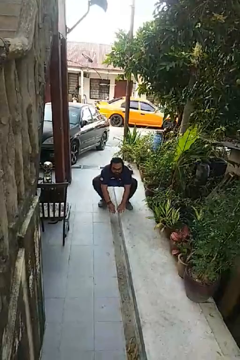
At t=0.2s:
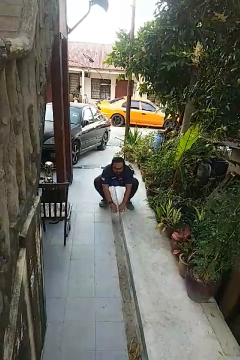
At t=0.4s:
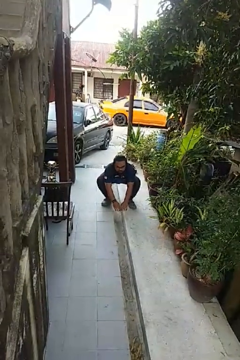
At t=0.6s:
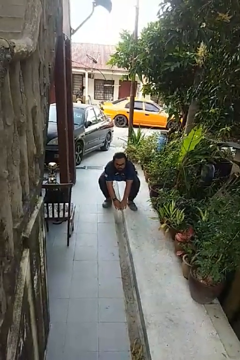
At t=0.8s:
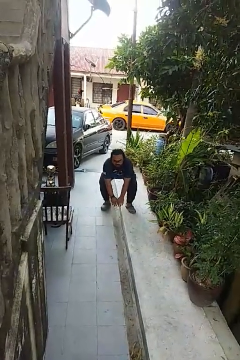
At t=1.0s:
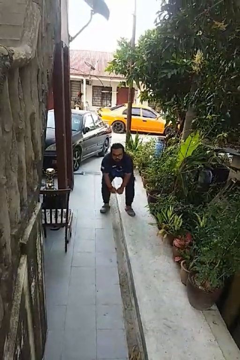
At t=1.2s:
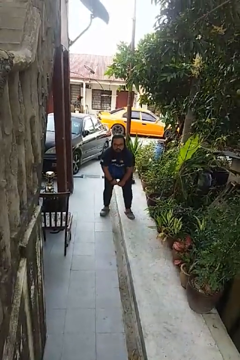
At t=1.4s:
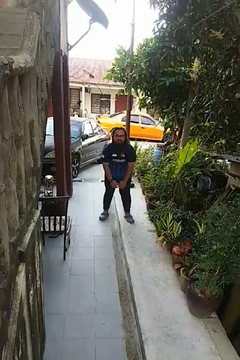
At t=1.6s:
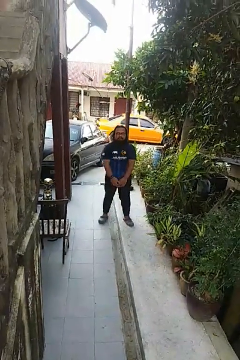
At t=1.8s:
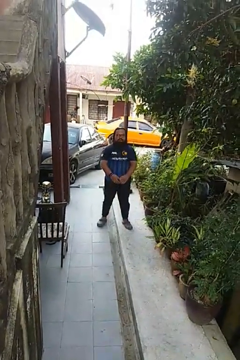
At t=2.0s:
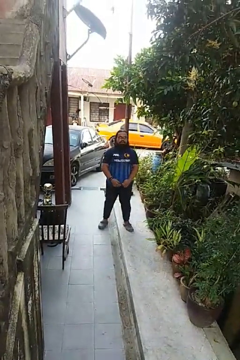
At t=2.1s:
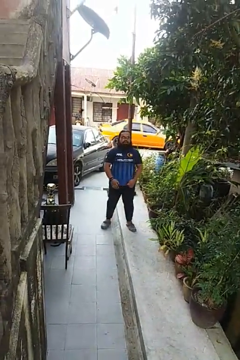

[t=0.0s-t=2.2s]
person stands up

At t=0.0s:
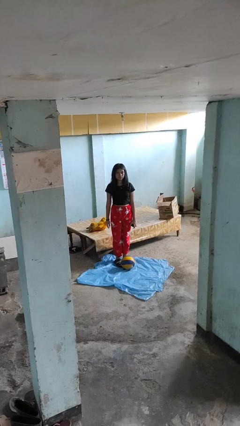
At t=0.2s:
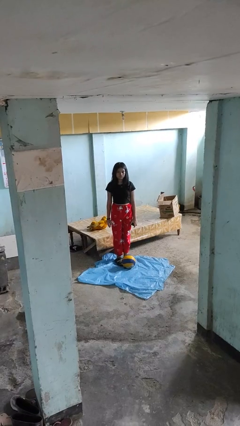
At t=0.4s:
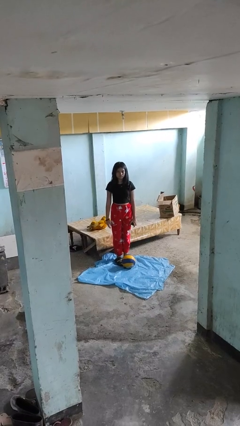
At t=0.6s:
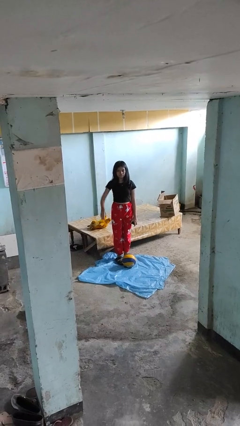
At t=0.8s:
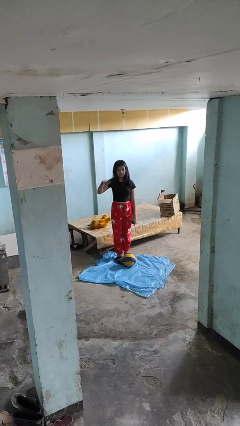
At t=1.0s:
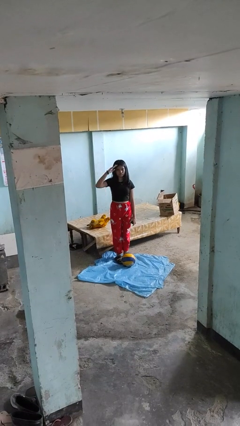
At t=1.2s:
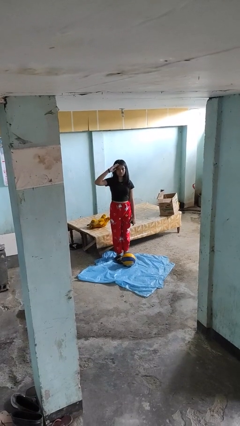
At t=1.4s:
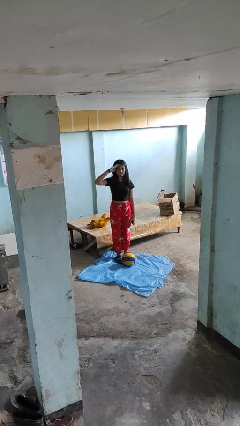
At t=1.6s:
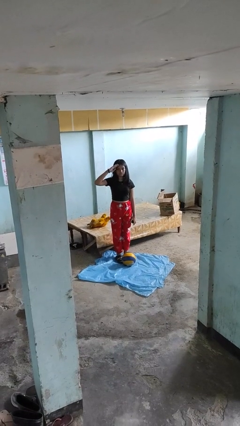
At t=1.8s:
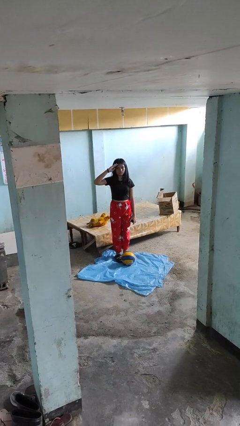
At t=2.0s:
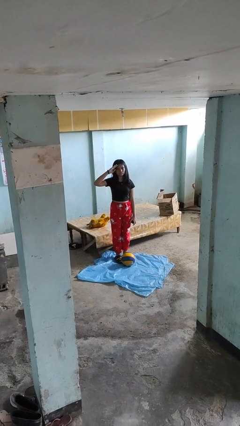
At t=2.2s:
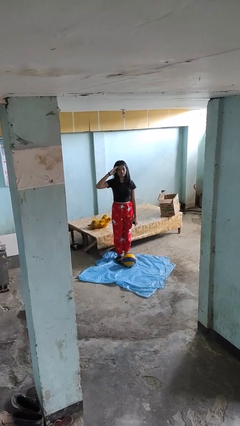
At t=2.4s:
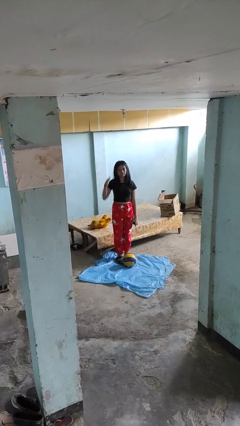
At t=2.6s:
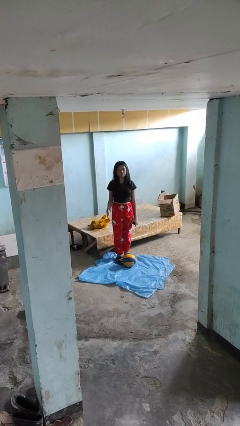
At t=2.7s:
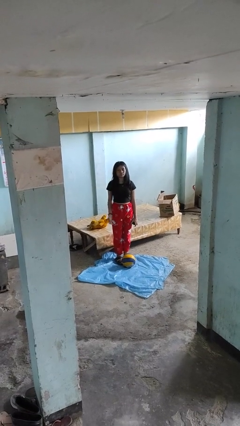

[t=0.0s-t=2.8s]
person salutes

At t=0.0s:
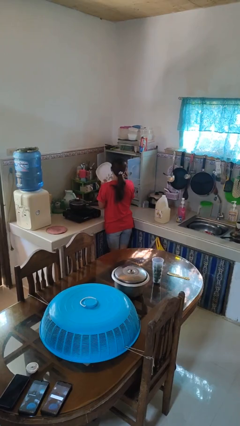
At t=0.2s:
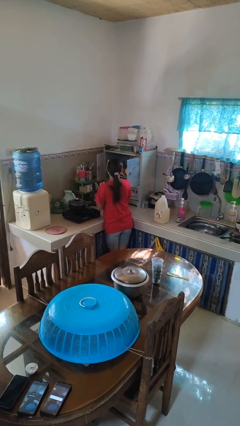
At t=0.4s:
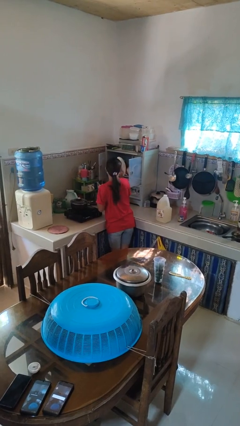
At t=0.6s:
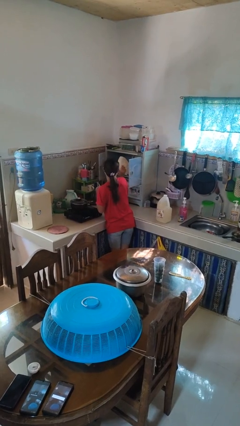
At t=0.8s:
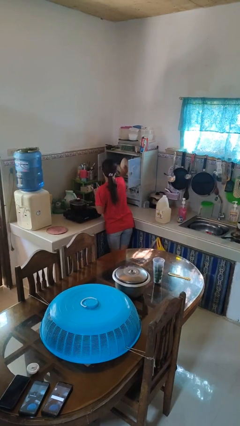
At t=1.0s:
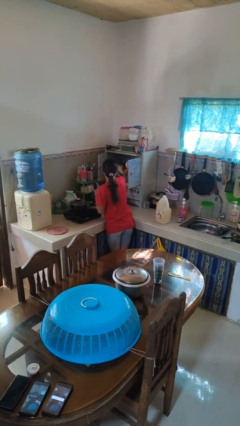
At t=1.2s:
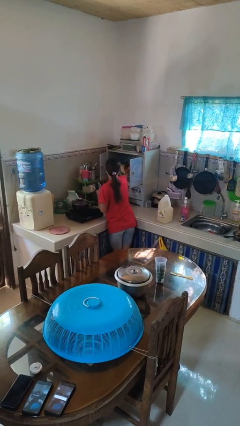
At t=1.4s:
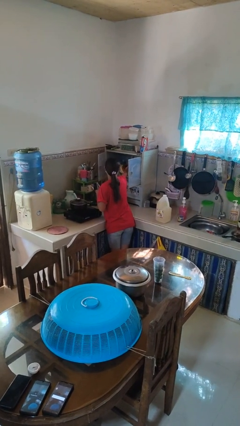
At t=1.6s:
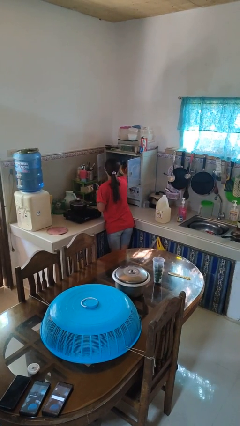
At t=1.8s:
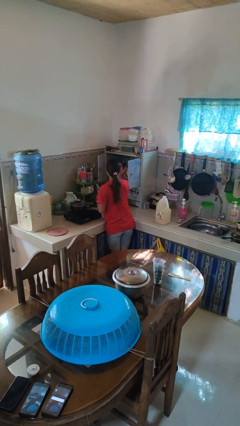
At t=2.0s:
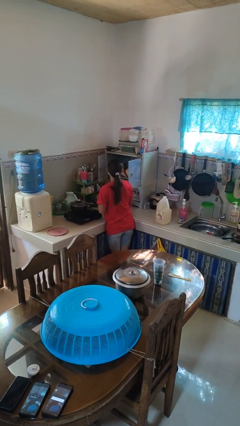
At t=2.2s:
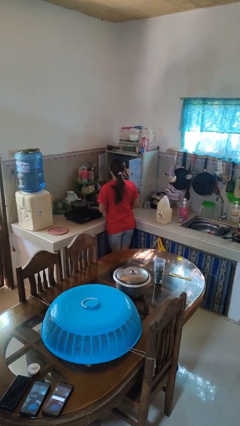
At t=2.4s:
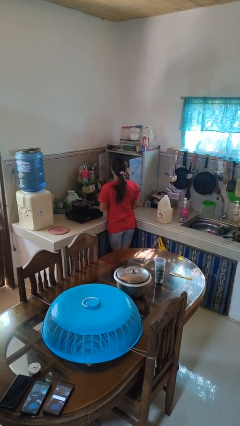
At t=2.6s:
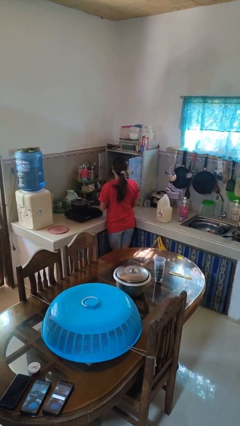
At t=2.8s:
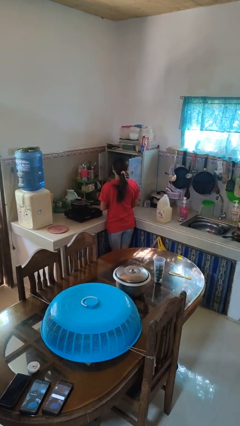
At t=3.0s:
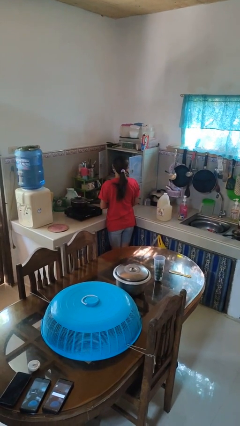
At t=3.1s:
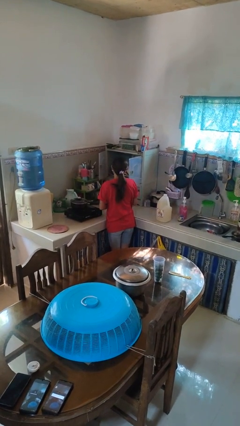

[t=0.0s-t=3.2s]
person puts object in cabinet

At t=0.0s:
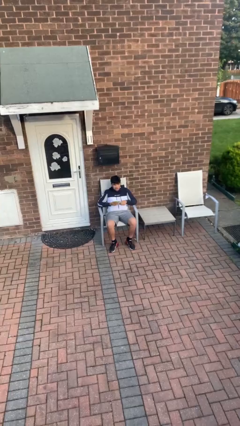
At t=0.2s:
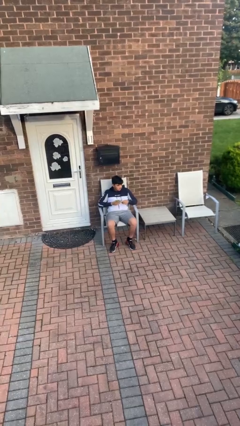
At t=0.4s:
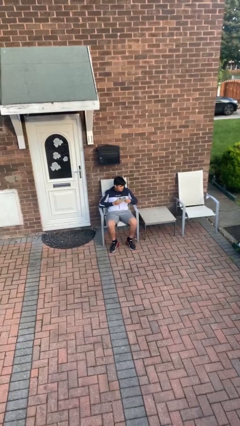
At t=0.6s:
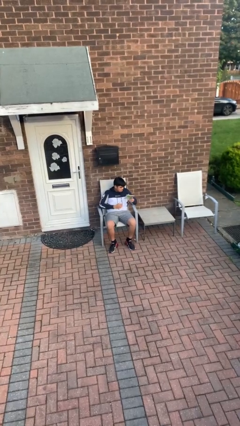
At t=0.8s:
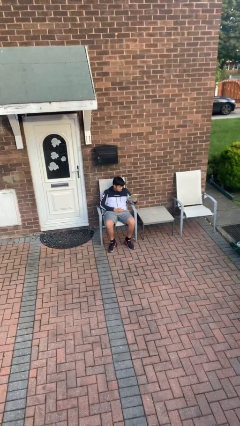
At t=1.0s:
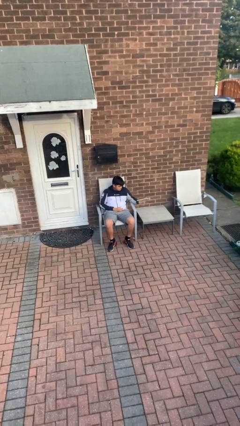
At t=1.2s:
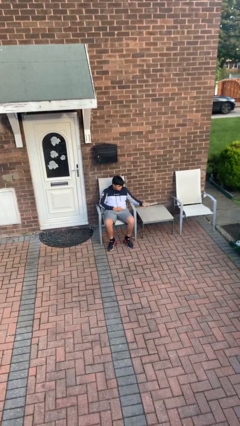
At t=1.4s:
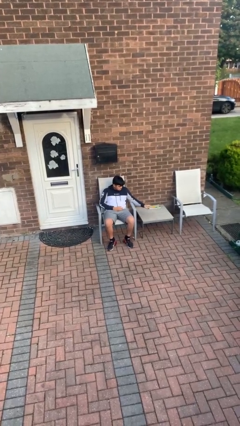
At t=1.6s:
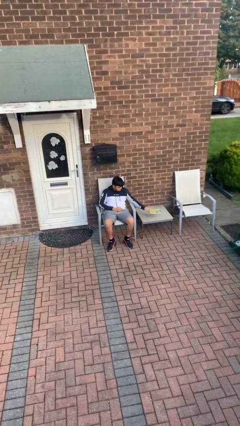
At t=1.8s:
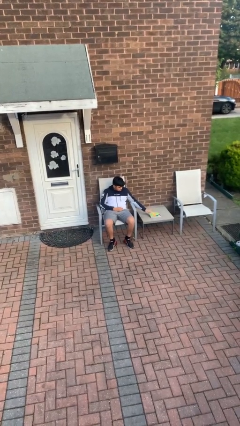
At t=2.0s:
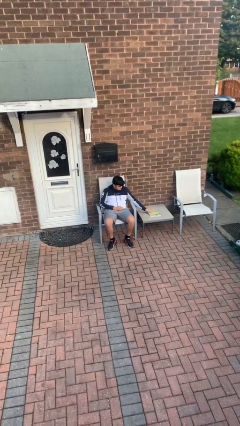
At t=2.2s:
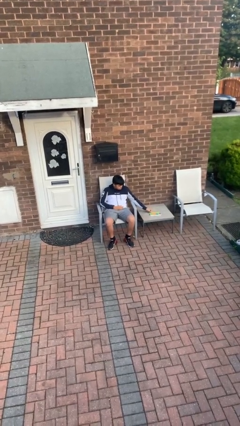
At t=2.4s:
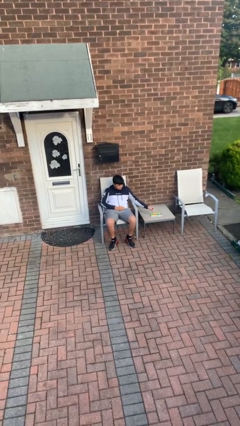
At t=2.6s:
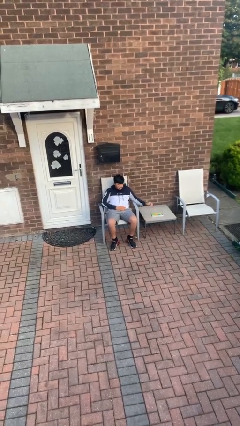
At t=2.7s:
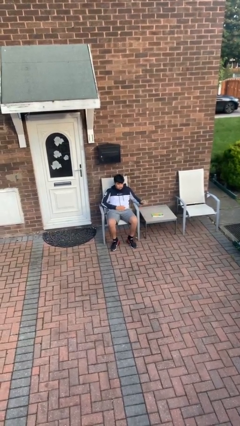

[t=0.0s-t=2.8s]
person puts down object on table

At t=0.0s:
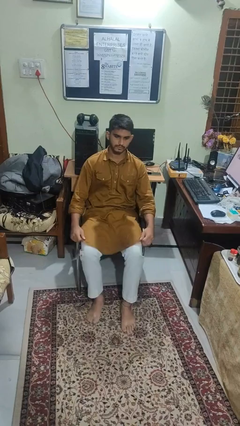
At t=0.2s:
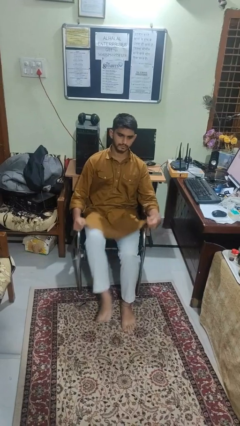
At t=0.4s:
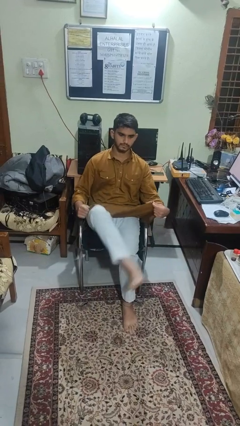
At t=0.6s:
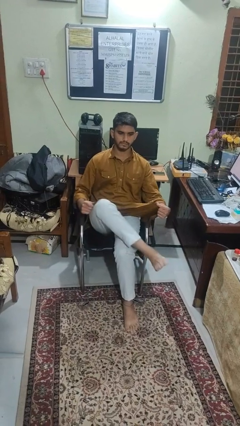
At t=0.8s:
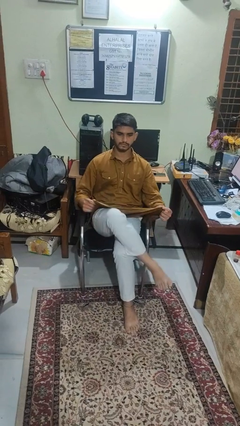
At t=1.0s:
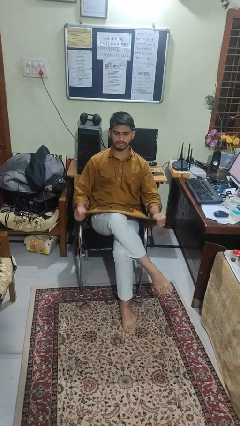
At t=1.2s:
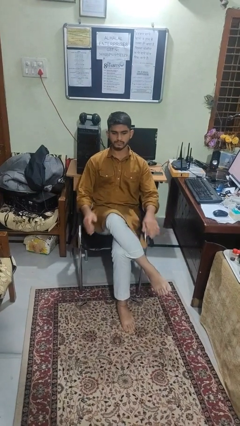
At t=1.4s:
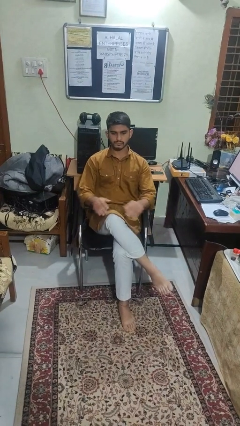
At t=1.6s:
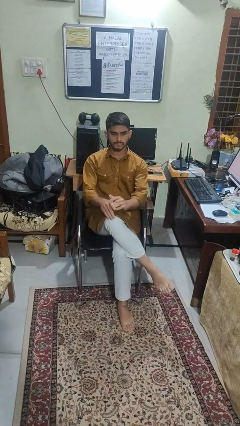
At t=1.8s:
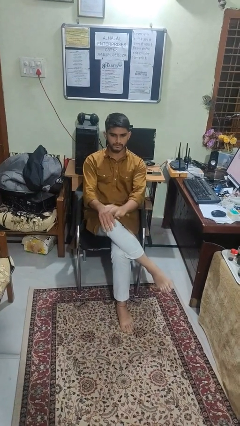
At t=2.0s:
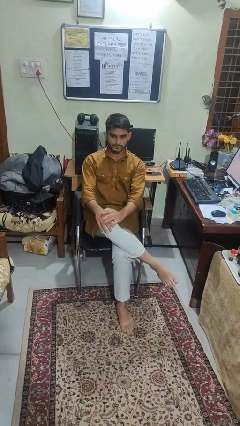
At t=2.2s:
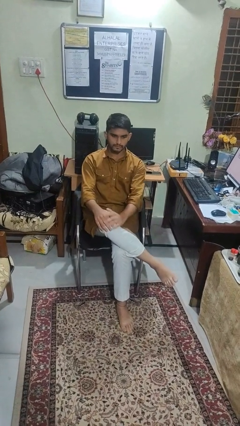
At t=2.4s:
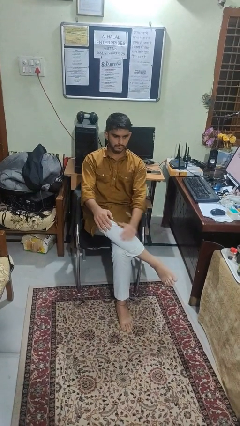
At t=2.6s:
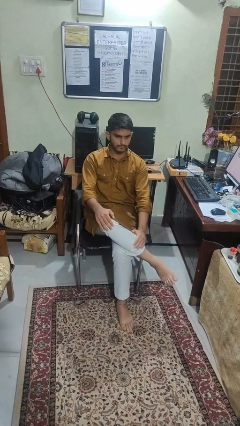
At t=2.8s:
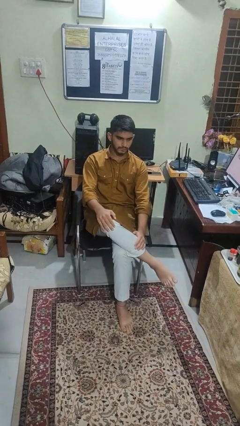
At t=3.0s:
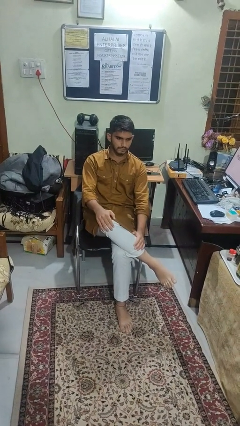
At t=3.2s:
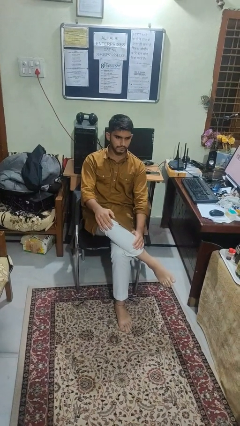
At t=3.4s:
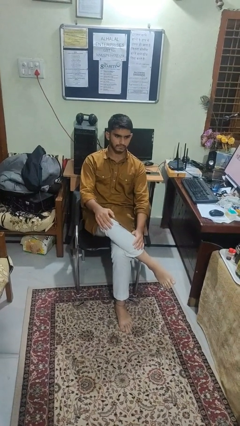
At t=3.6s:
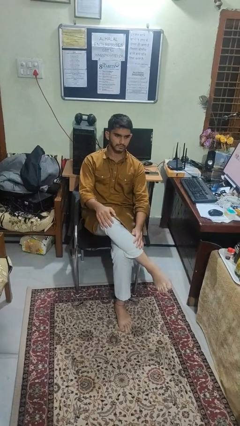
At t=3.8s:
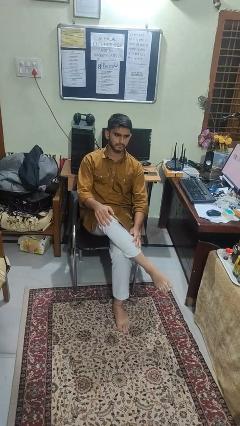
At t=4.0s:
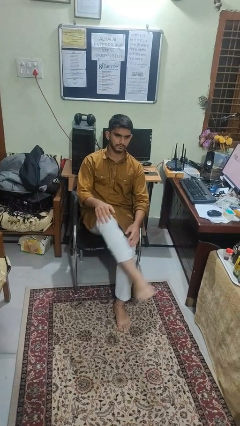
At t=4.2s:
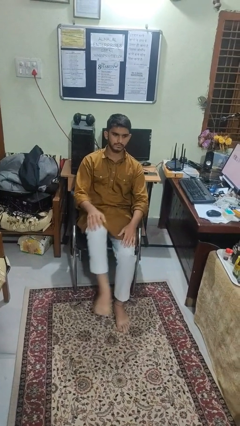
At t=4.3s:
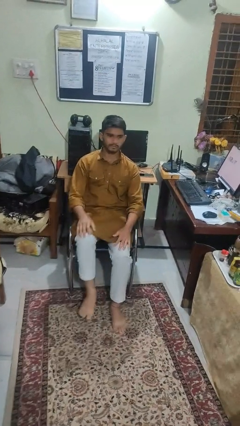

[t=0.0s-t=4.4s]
person crosses legs

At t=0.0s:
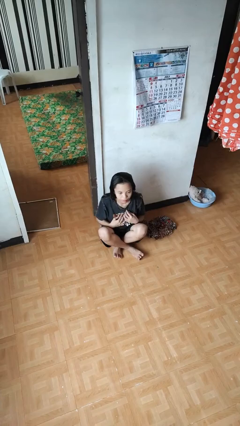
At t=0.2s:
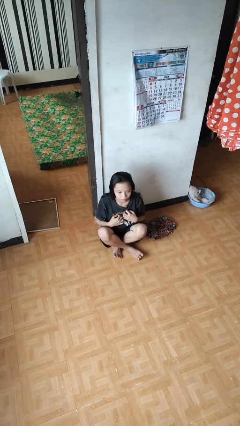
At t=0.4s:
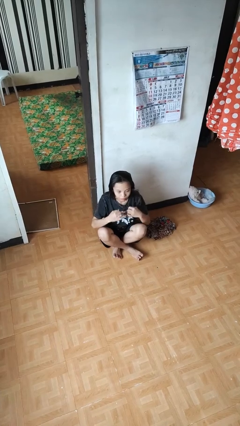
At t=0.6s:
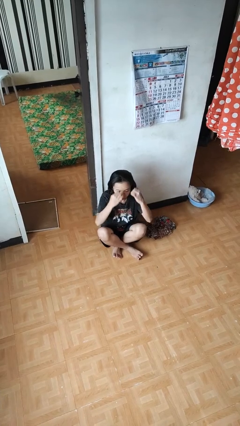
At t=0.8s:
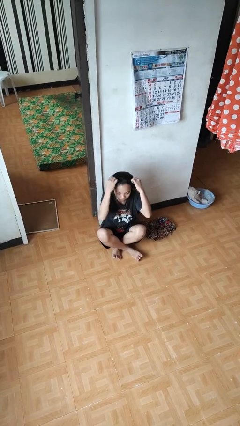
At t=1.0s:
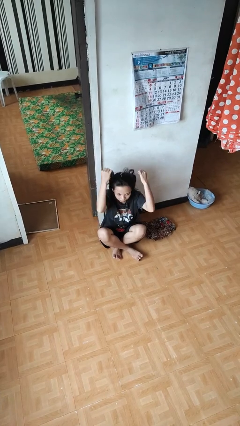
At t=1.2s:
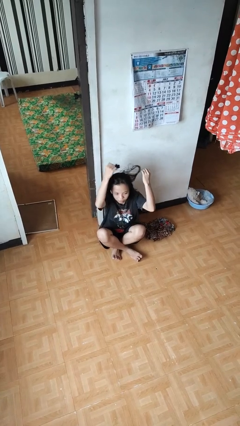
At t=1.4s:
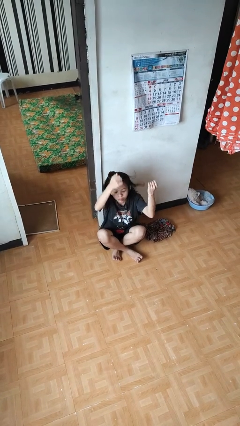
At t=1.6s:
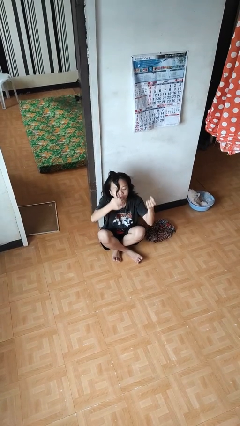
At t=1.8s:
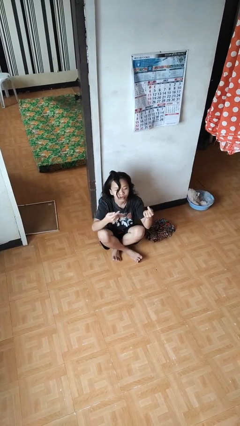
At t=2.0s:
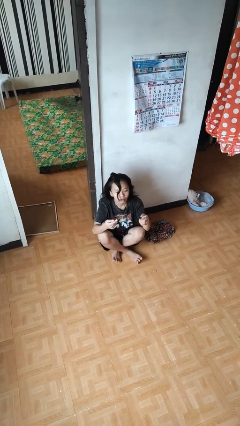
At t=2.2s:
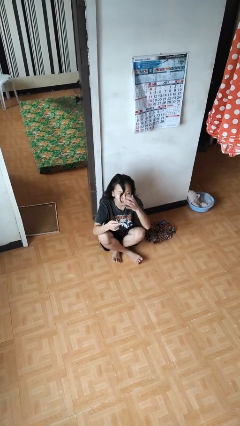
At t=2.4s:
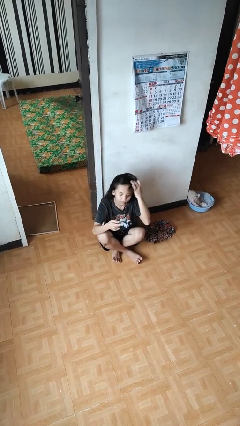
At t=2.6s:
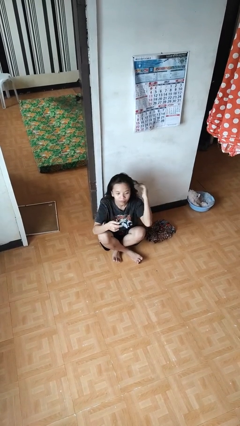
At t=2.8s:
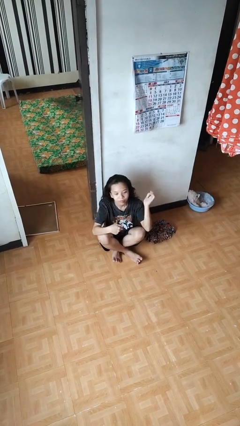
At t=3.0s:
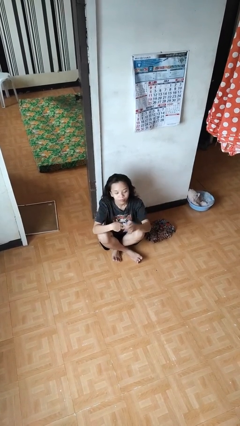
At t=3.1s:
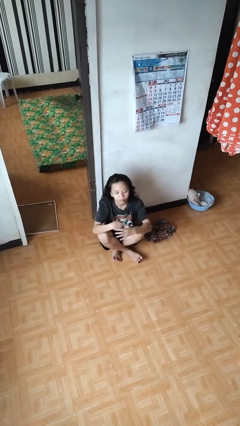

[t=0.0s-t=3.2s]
person takes off necklace
